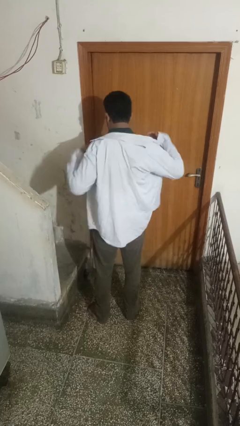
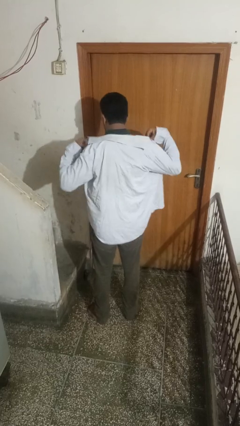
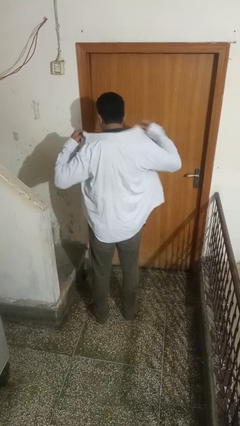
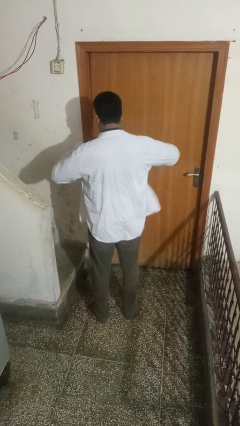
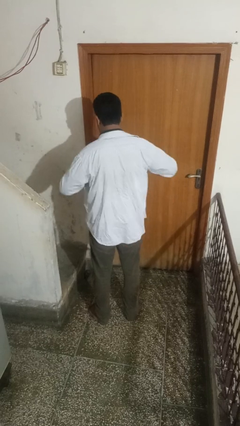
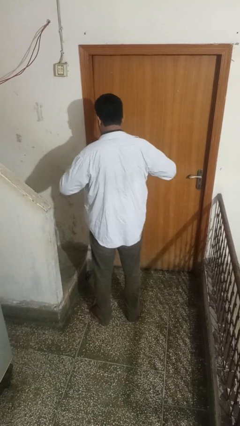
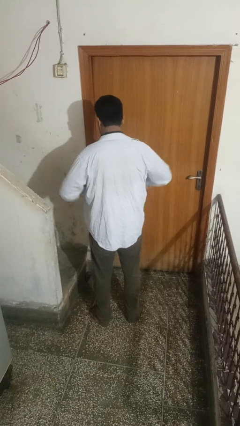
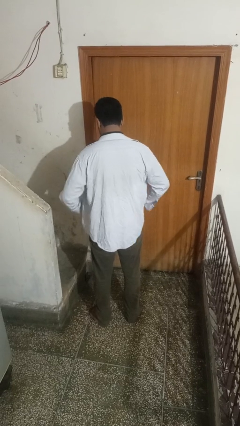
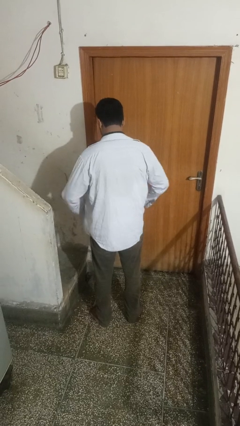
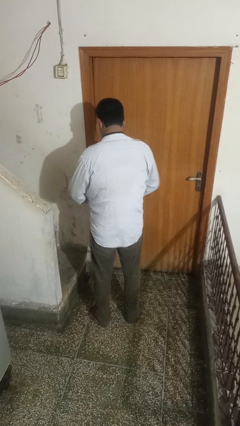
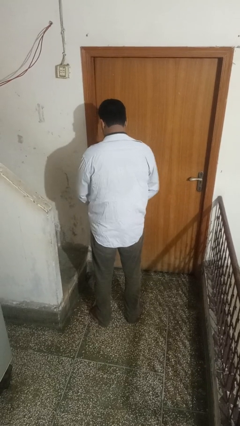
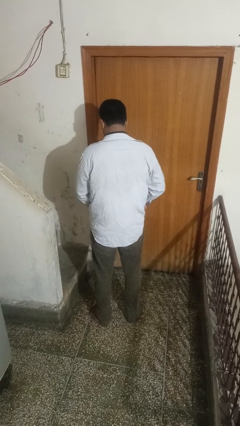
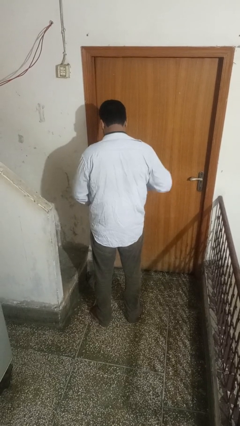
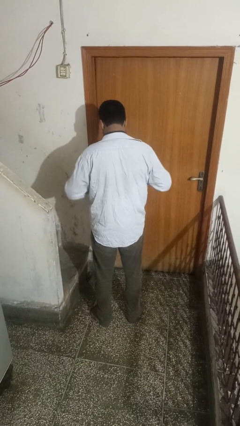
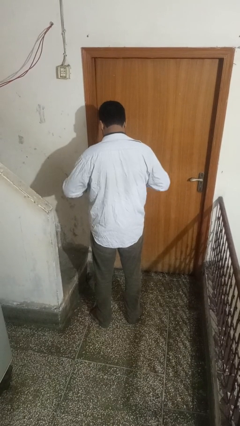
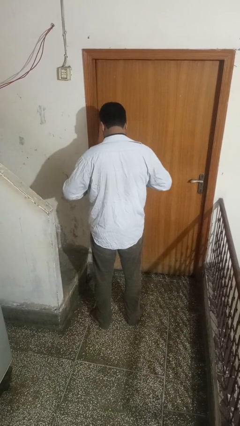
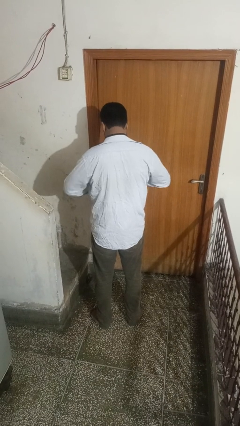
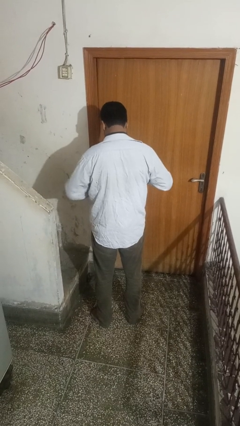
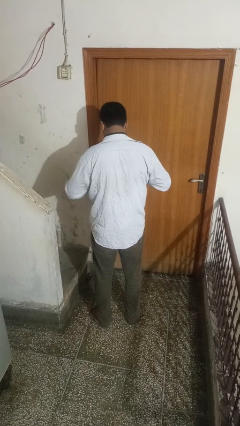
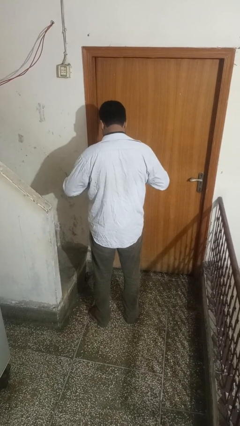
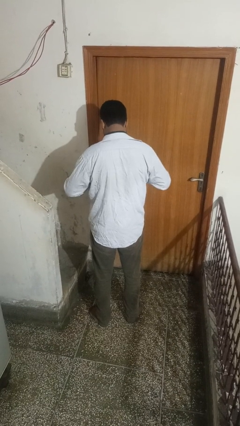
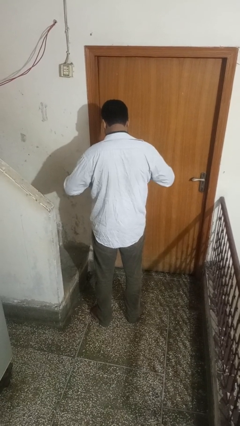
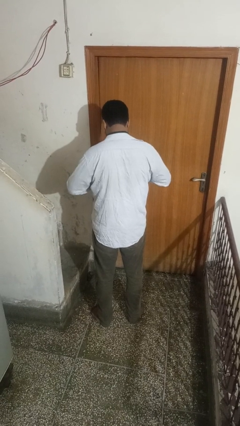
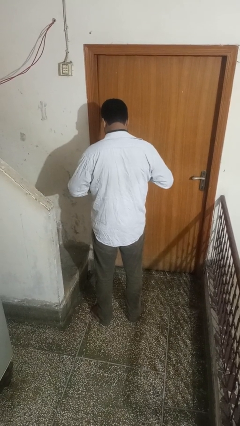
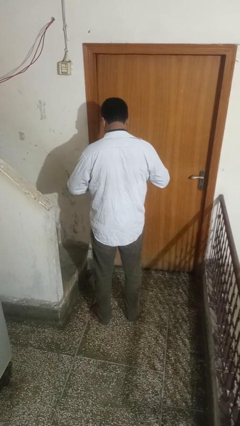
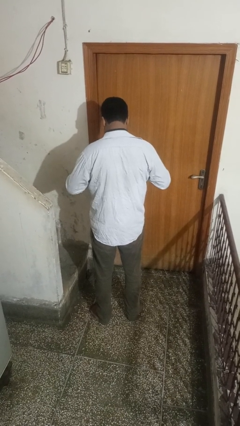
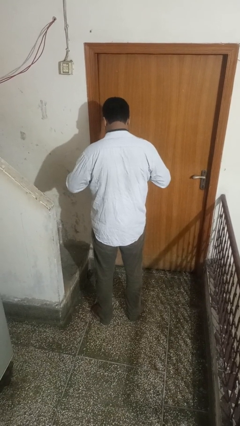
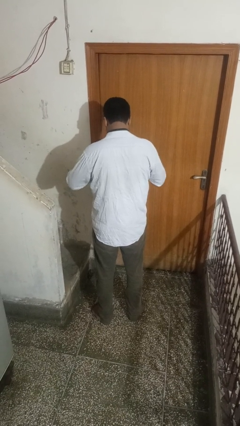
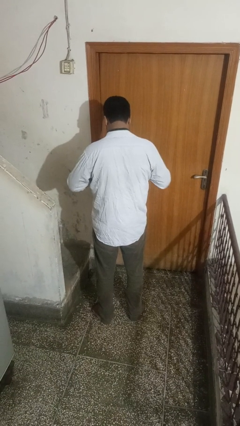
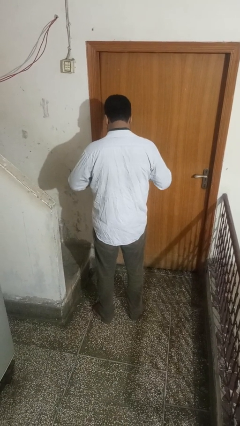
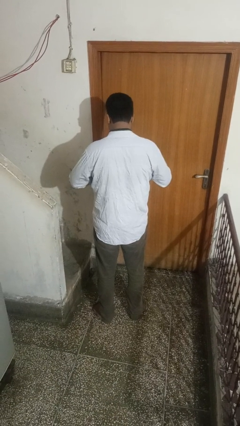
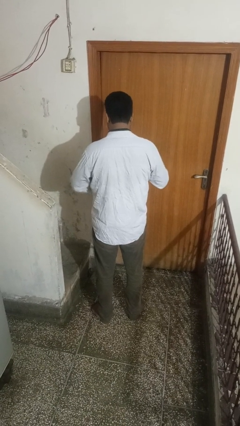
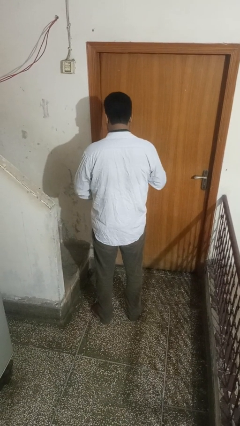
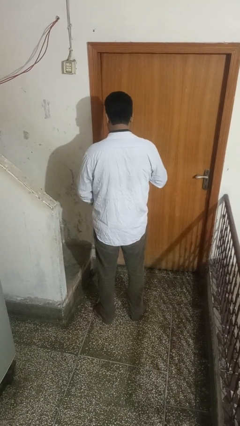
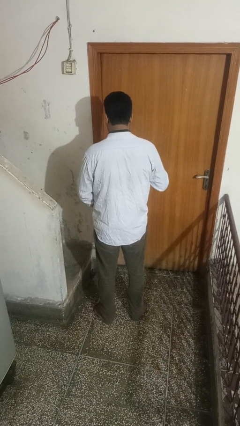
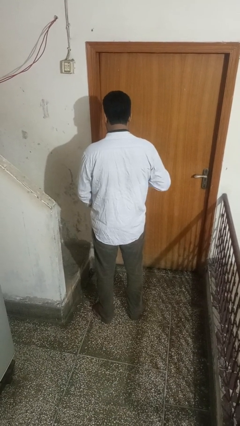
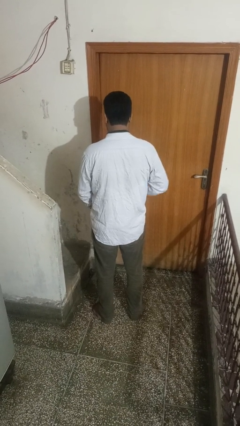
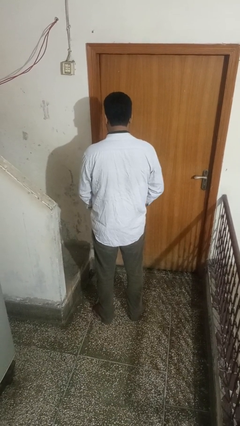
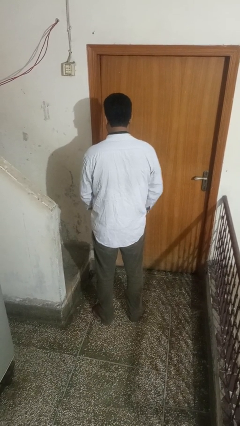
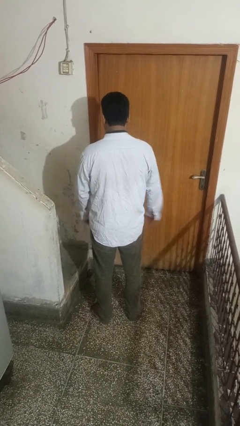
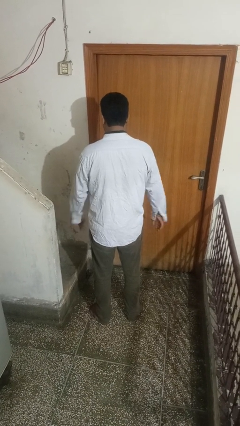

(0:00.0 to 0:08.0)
person buttons shirt

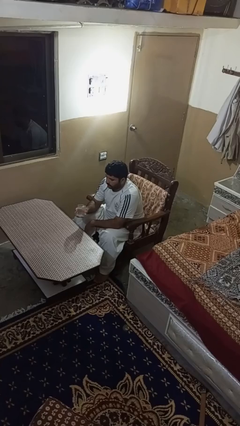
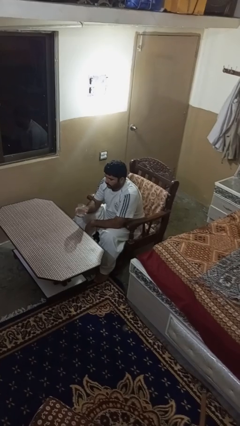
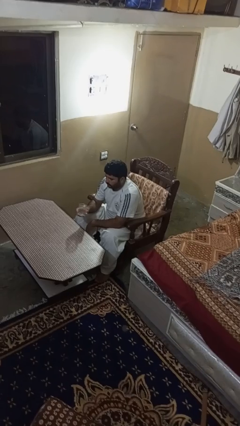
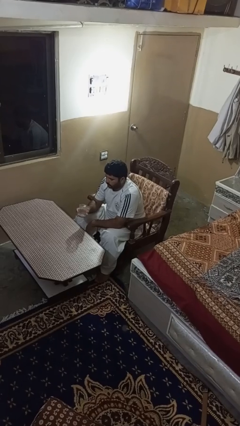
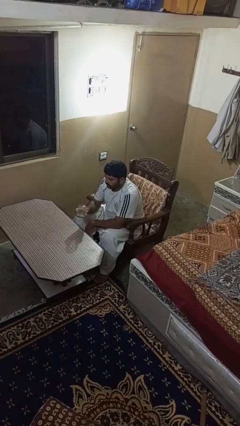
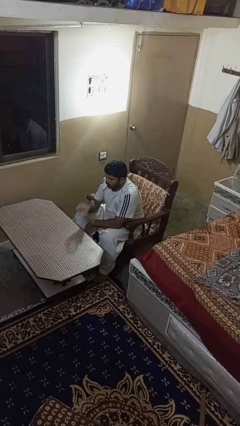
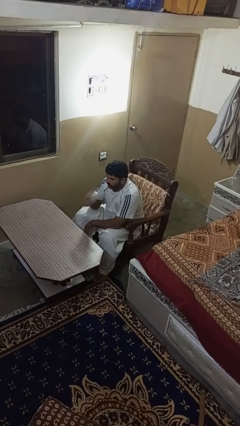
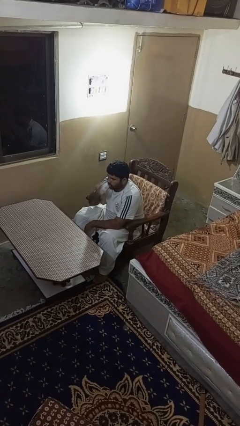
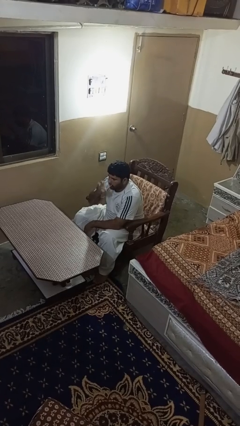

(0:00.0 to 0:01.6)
person drinks from shotglass

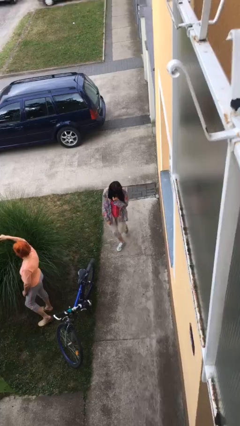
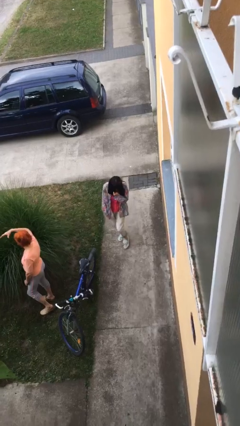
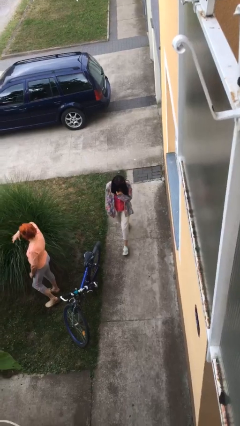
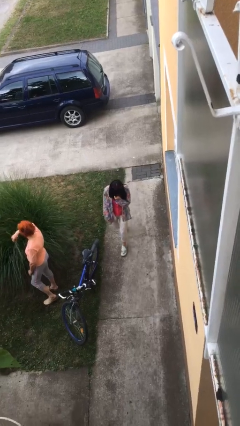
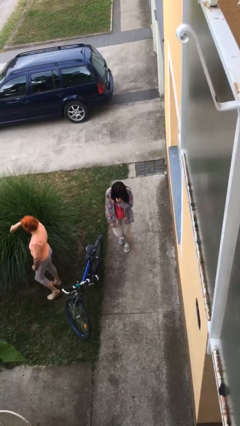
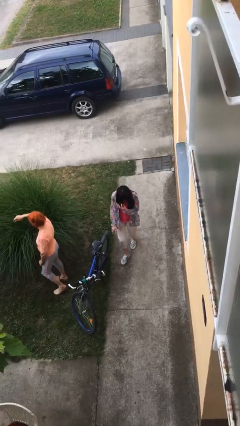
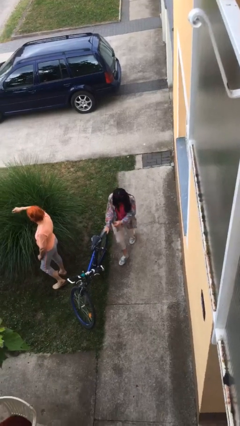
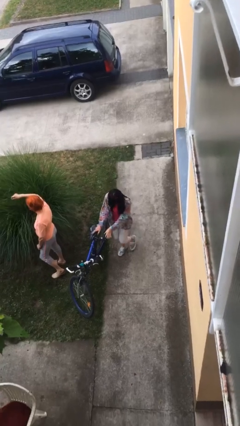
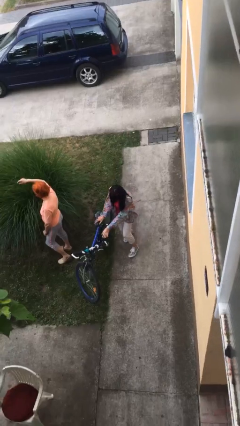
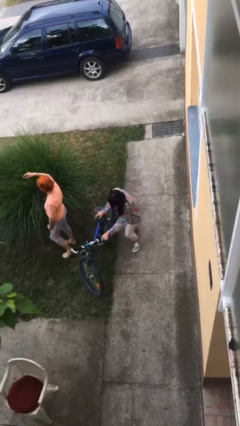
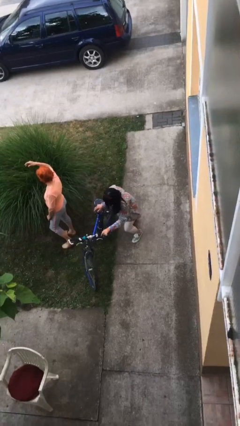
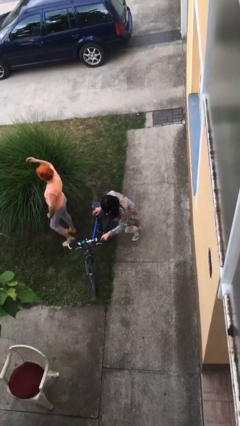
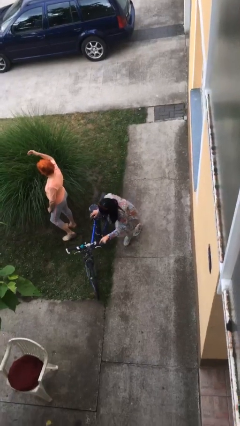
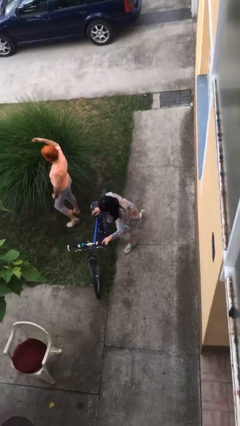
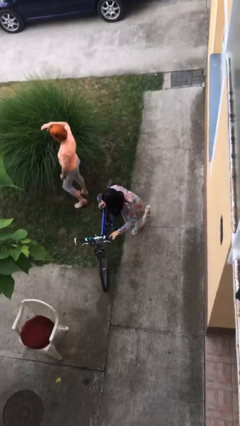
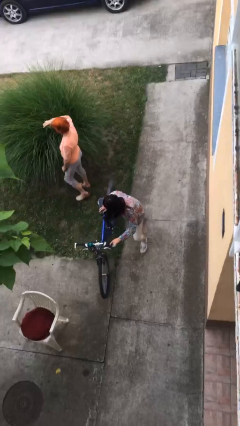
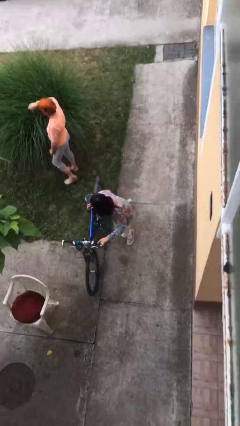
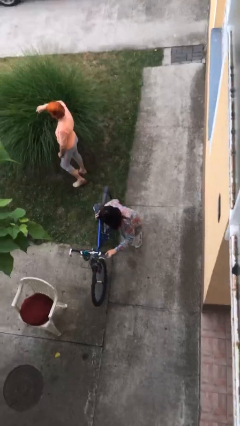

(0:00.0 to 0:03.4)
person steals object from person

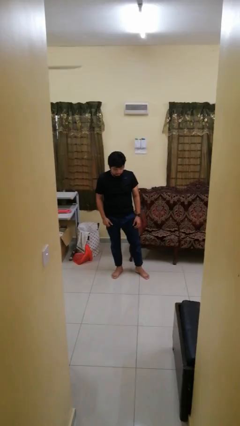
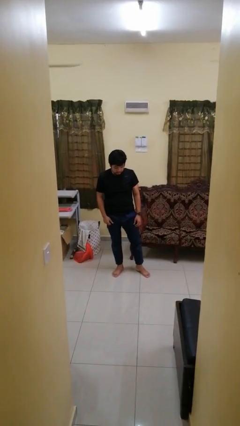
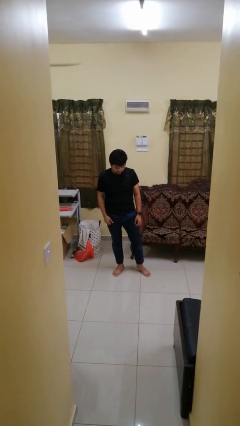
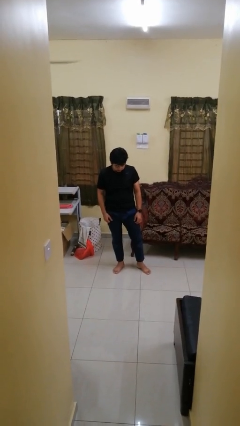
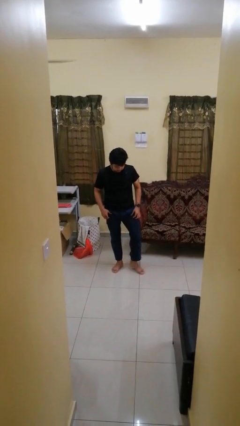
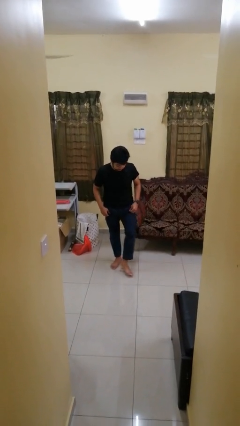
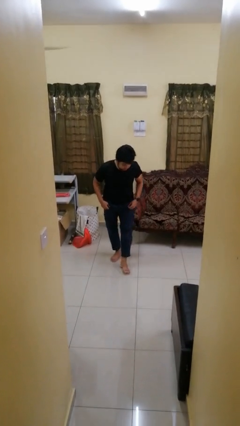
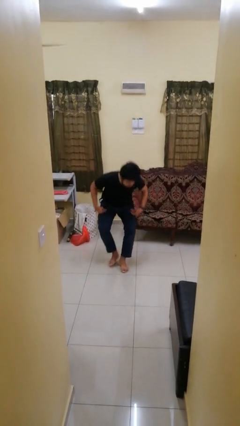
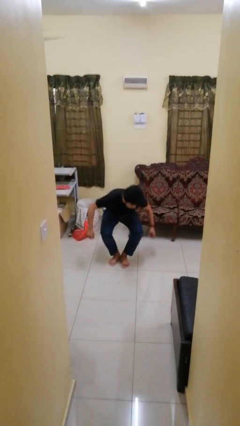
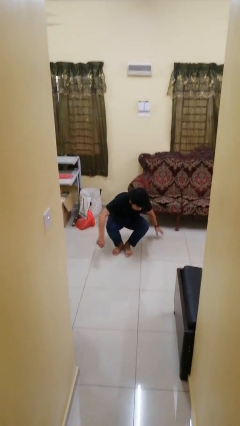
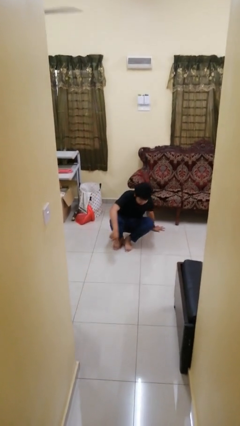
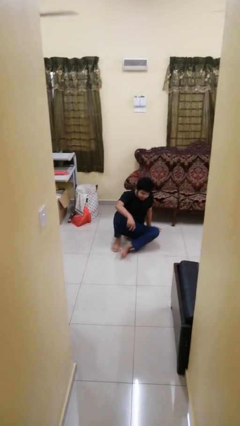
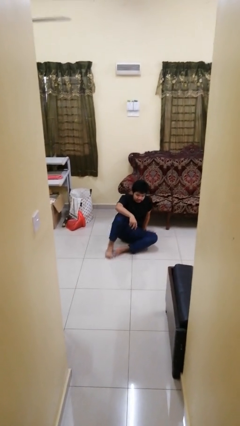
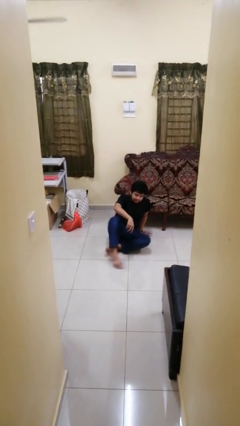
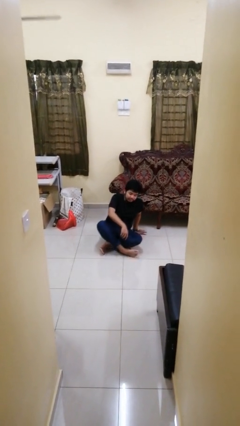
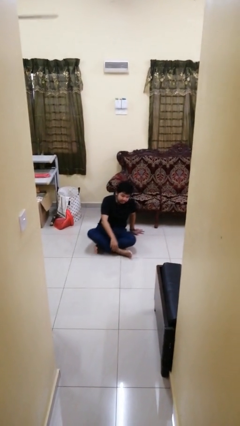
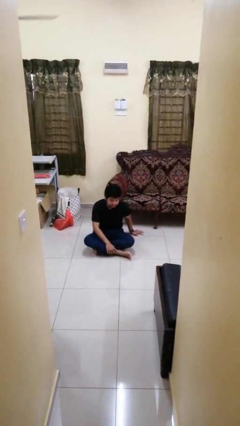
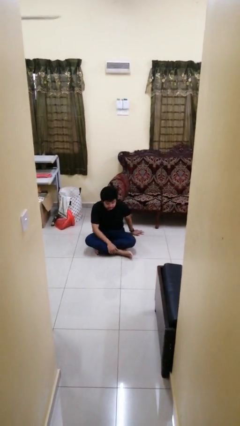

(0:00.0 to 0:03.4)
person sits crisscross

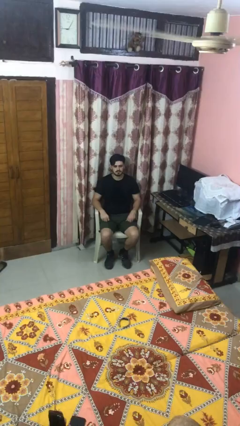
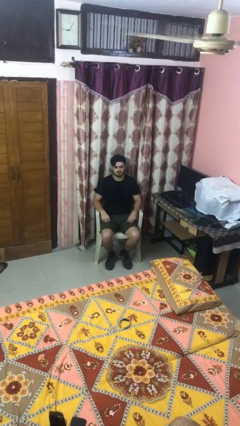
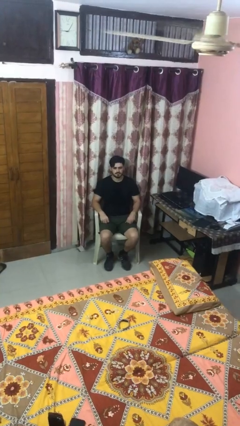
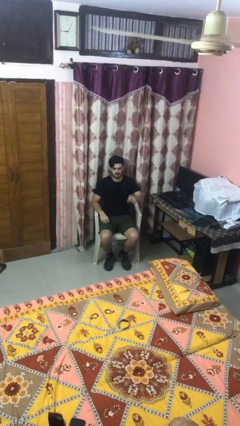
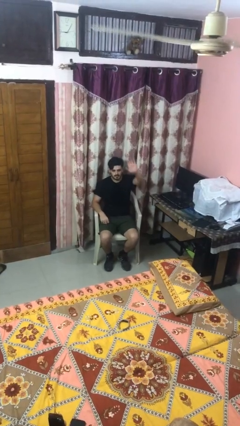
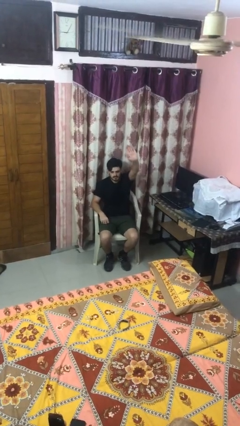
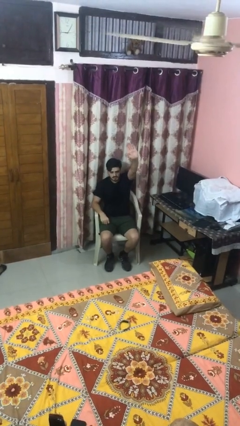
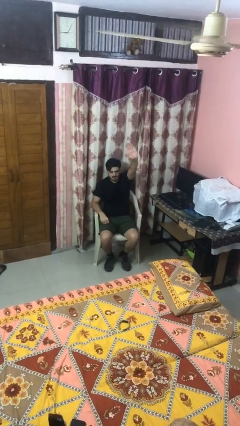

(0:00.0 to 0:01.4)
person gestures raise hand
